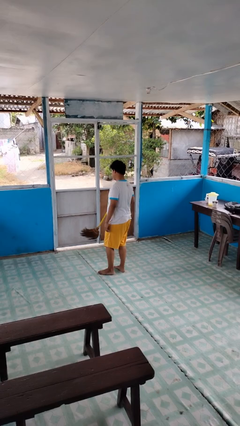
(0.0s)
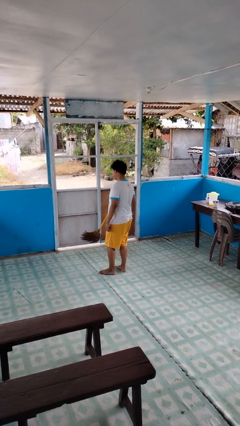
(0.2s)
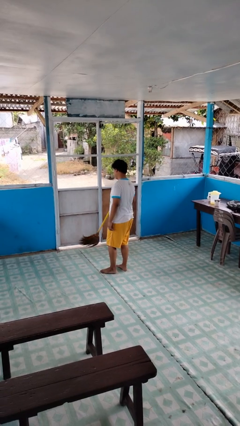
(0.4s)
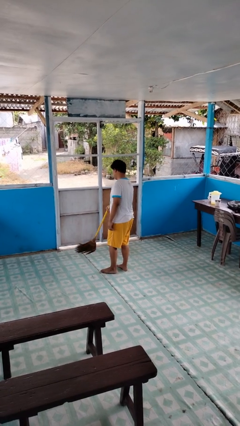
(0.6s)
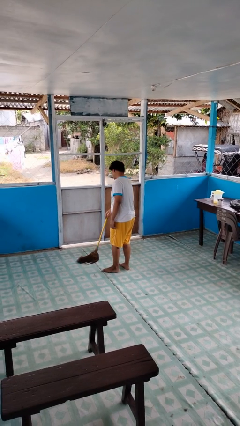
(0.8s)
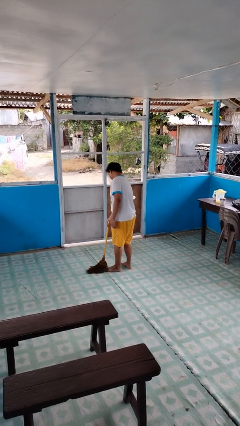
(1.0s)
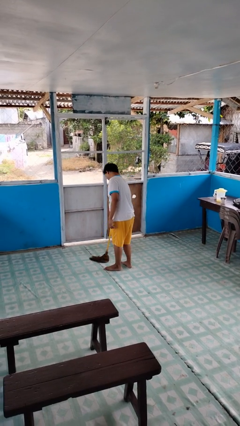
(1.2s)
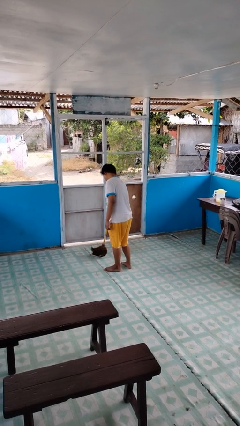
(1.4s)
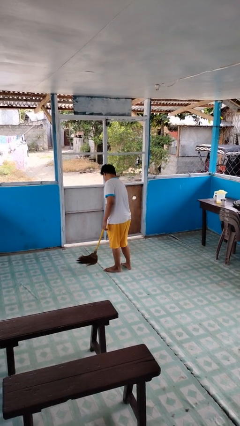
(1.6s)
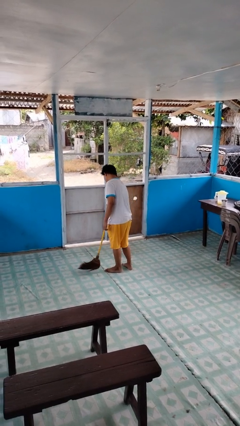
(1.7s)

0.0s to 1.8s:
person sweeps floor

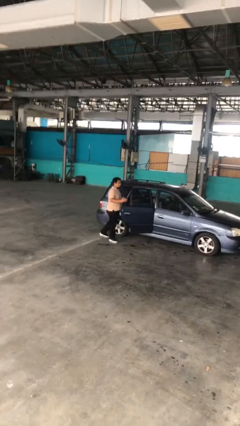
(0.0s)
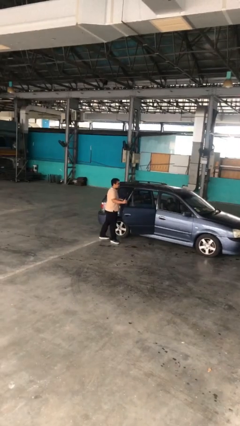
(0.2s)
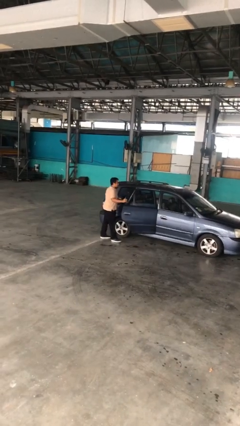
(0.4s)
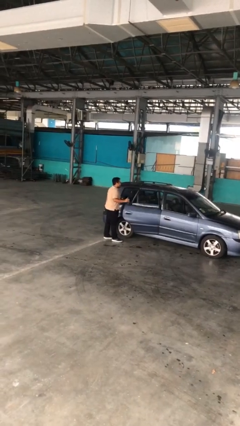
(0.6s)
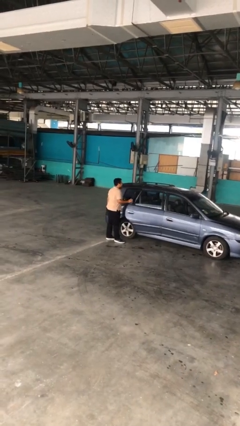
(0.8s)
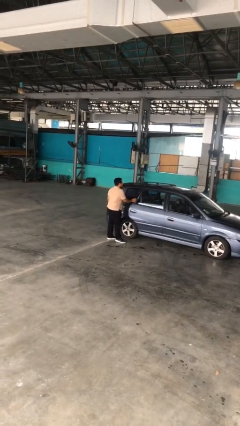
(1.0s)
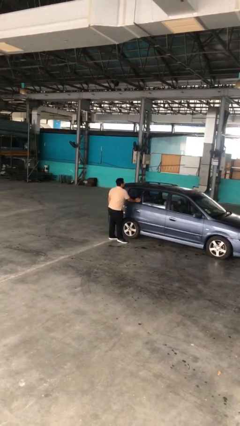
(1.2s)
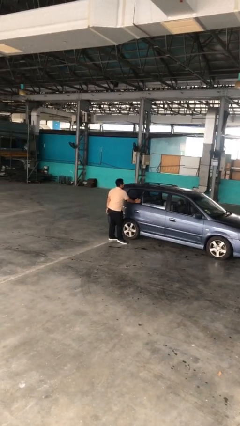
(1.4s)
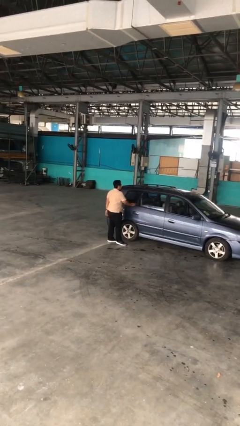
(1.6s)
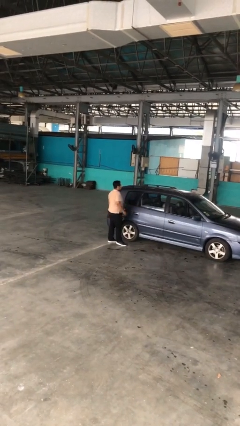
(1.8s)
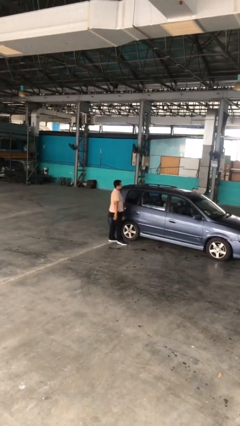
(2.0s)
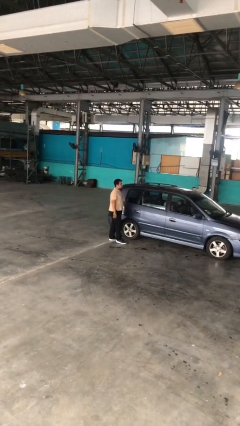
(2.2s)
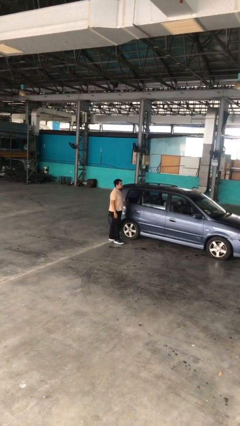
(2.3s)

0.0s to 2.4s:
person closes car door

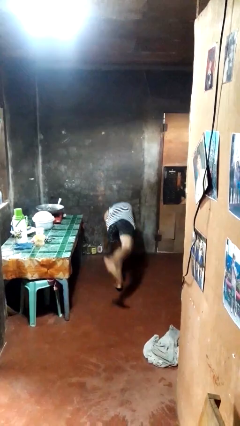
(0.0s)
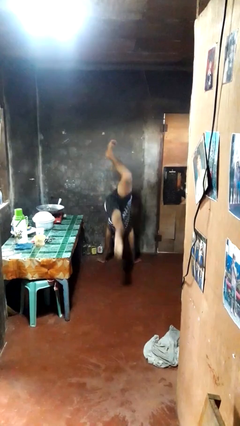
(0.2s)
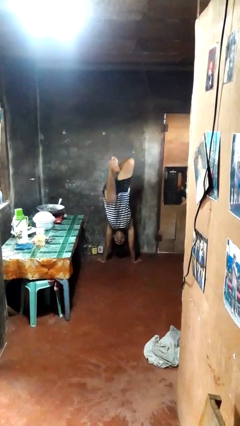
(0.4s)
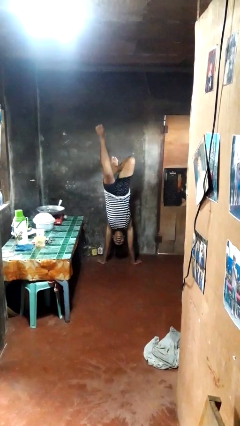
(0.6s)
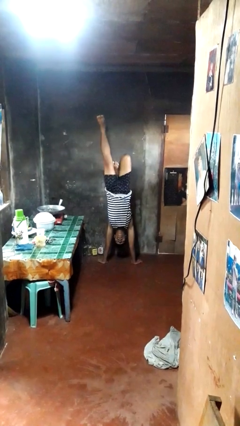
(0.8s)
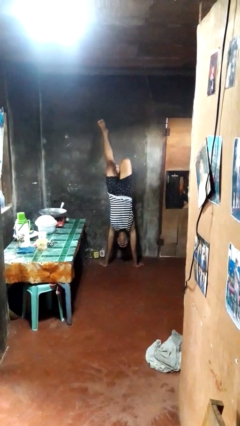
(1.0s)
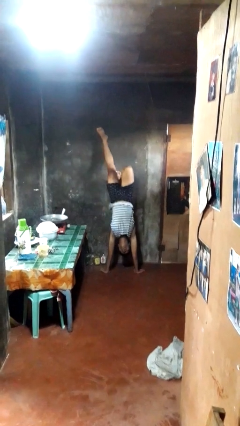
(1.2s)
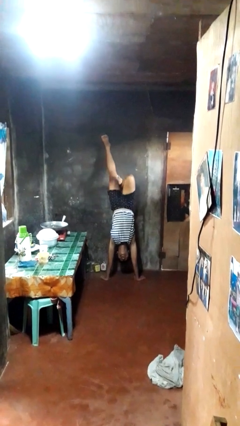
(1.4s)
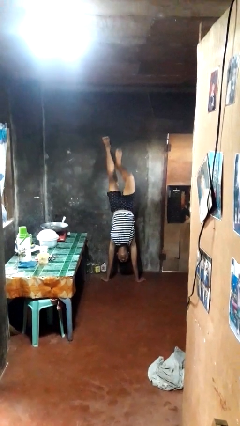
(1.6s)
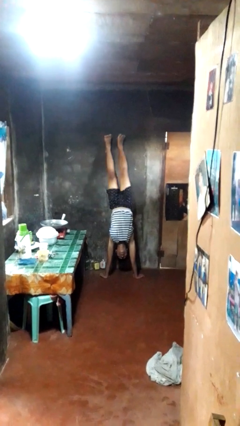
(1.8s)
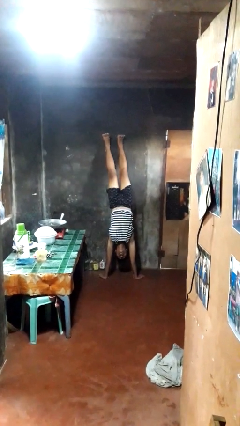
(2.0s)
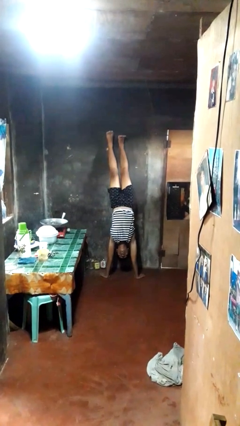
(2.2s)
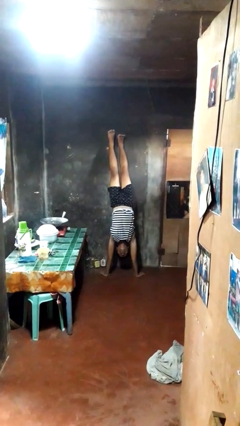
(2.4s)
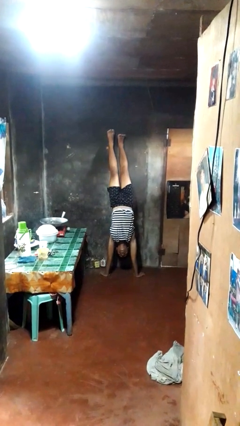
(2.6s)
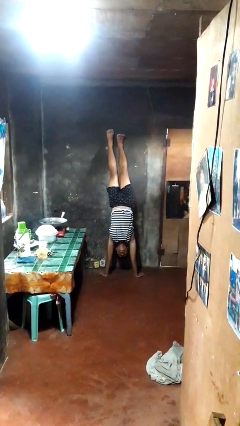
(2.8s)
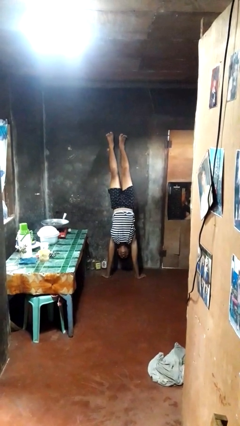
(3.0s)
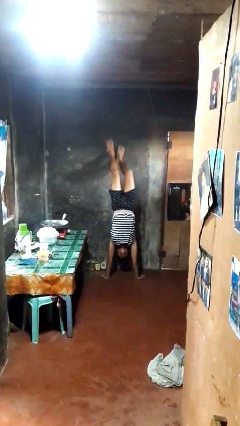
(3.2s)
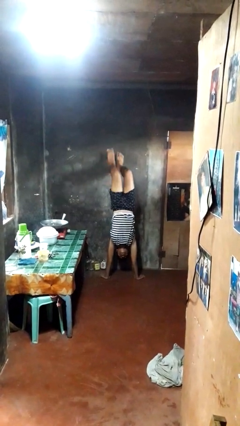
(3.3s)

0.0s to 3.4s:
person handstand

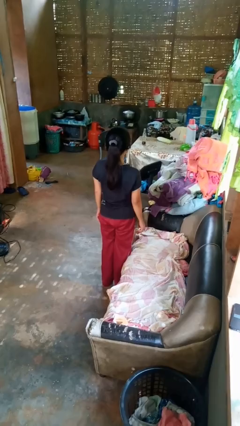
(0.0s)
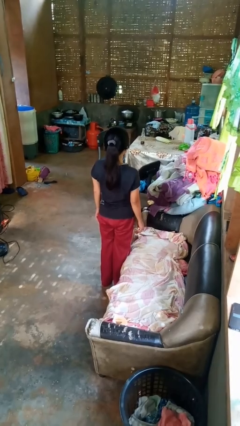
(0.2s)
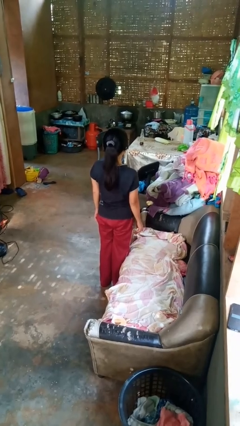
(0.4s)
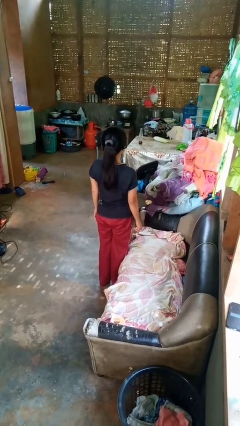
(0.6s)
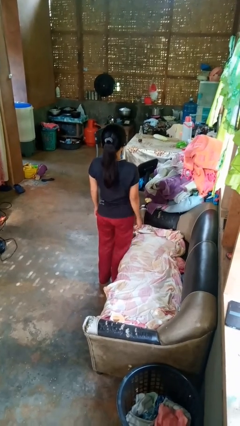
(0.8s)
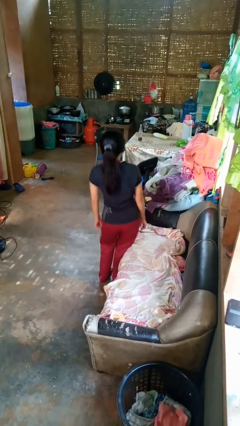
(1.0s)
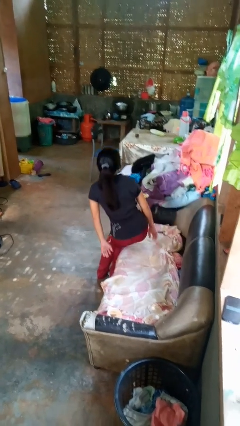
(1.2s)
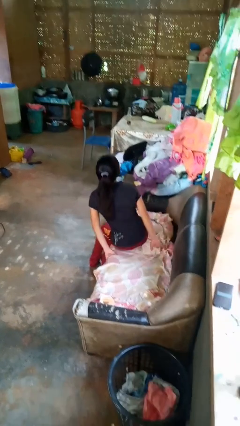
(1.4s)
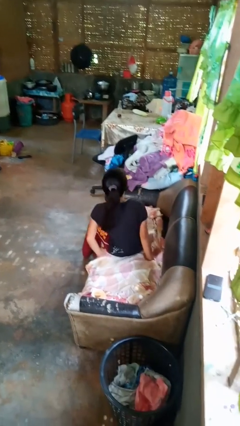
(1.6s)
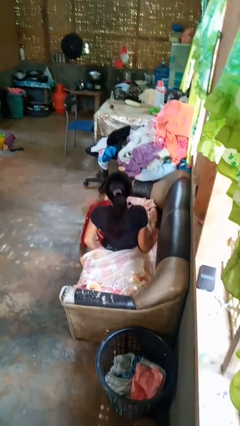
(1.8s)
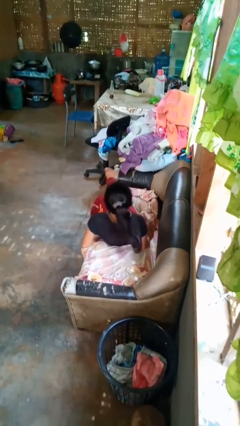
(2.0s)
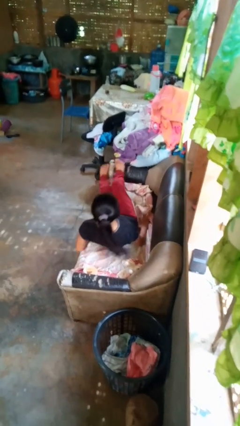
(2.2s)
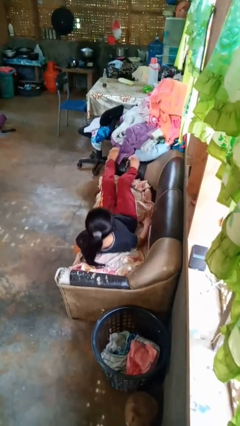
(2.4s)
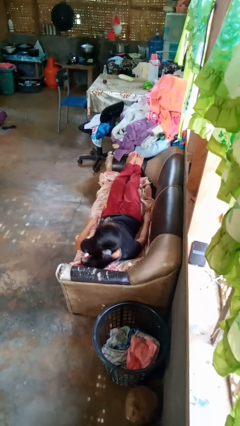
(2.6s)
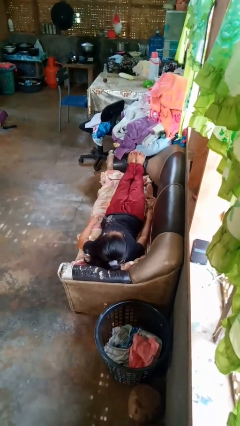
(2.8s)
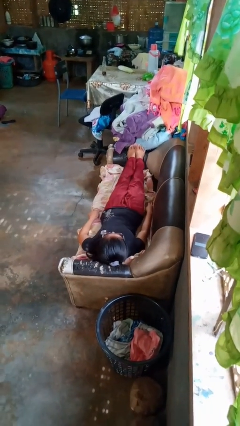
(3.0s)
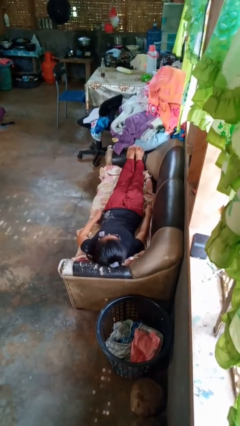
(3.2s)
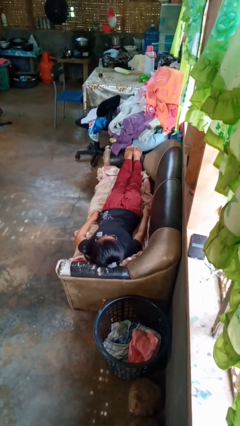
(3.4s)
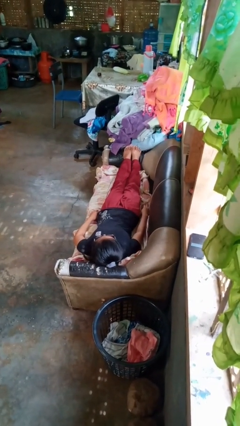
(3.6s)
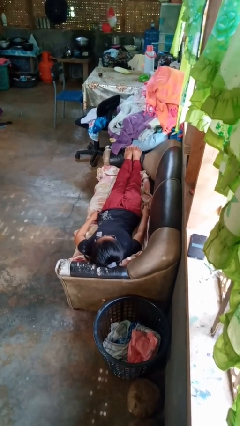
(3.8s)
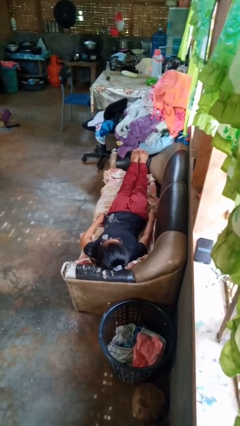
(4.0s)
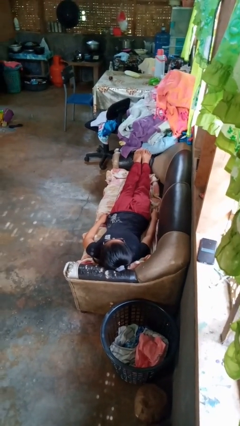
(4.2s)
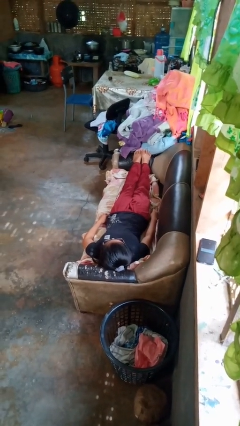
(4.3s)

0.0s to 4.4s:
person lies down on couch

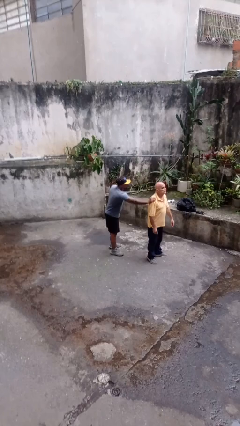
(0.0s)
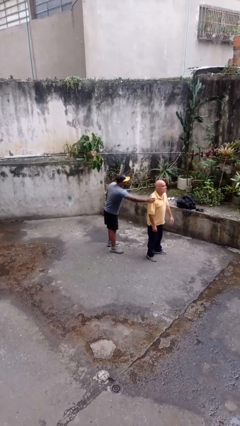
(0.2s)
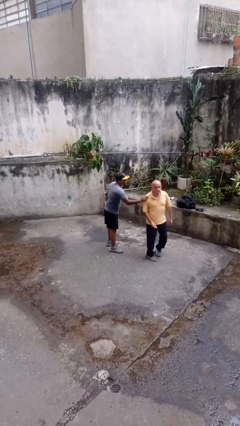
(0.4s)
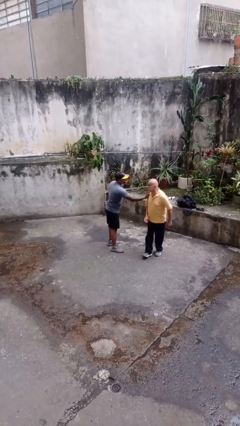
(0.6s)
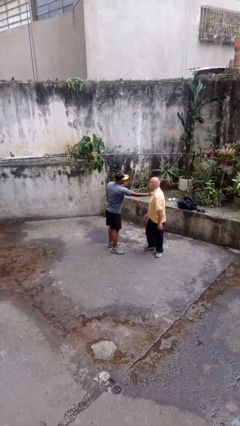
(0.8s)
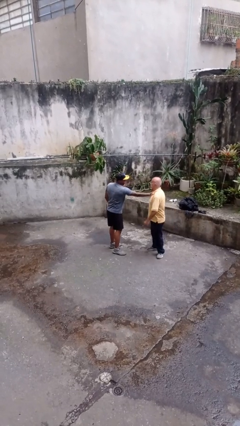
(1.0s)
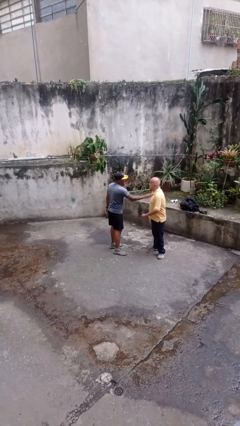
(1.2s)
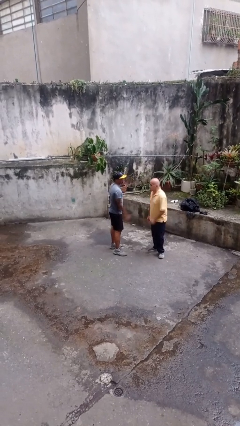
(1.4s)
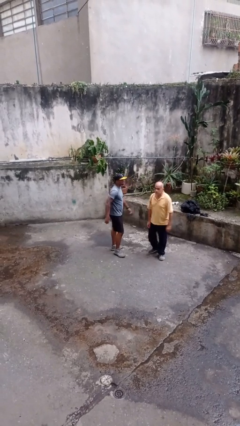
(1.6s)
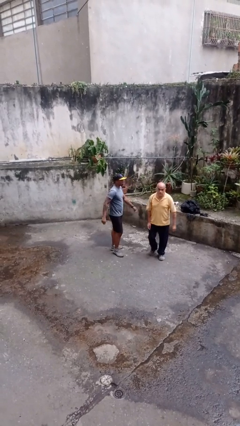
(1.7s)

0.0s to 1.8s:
person spins person around

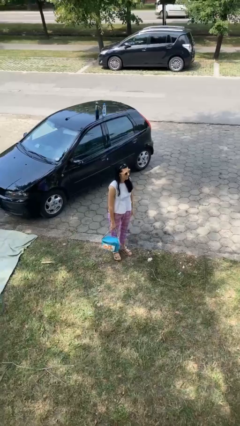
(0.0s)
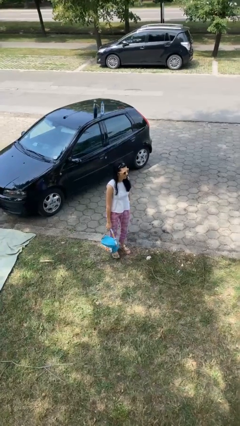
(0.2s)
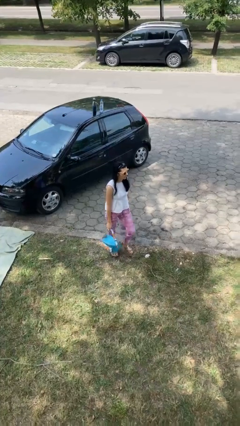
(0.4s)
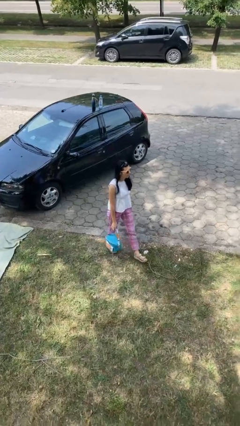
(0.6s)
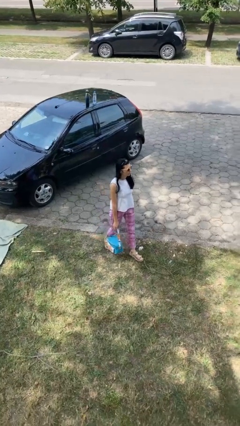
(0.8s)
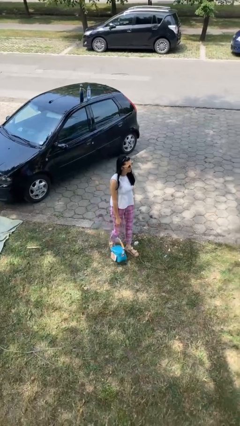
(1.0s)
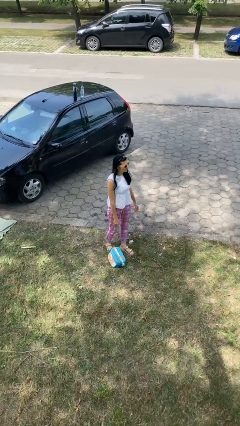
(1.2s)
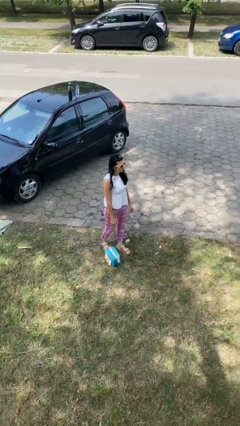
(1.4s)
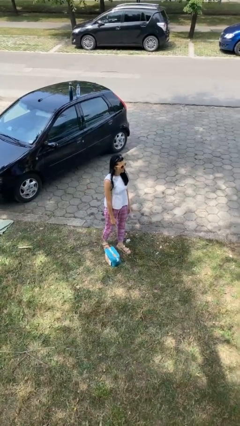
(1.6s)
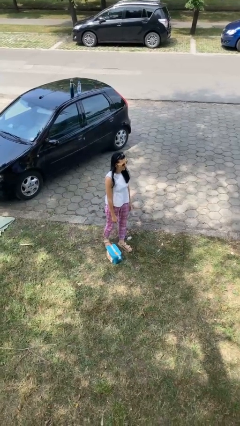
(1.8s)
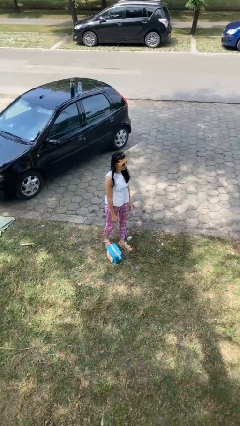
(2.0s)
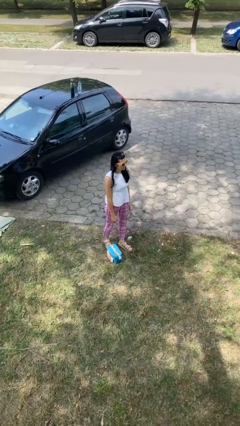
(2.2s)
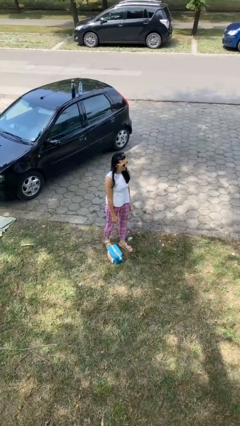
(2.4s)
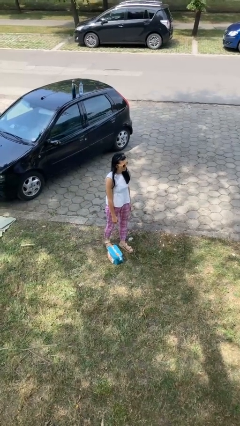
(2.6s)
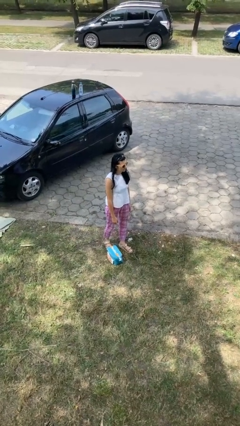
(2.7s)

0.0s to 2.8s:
person drops object

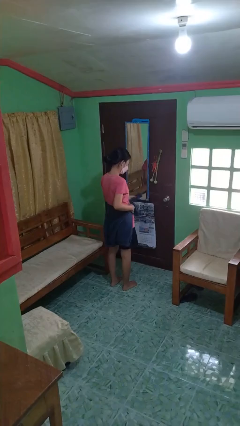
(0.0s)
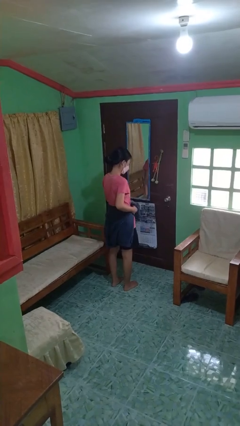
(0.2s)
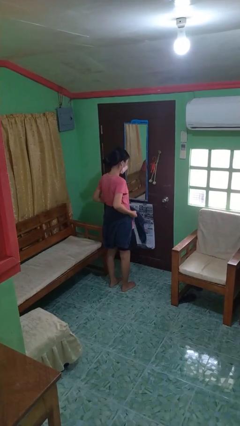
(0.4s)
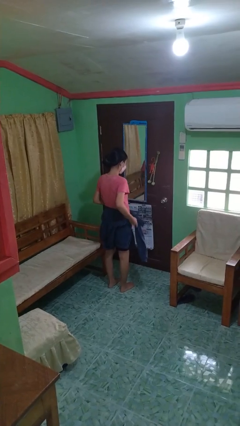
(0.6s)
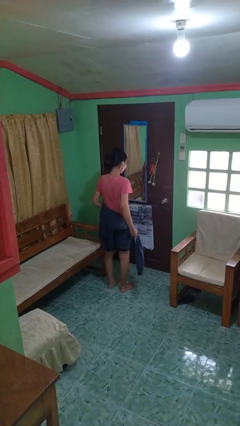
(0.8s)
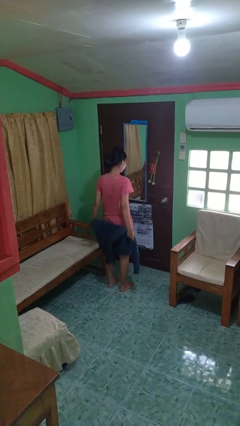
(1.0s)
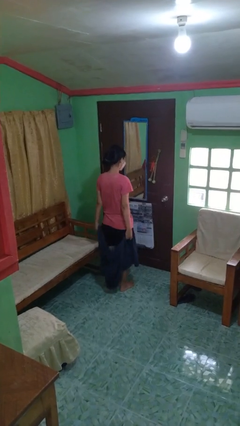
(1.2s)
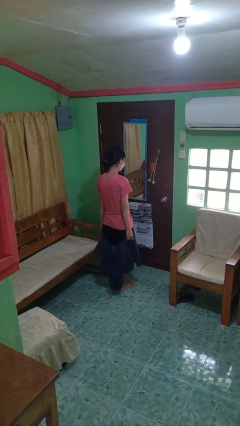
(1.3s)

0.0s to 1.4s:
person unties jacket around waist
